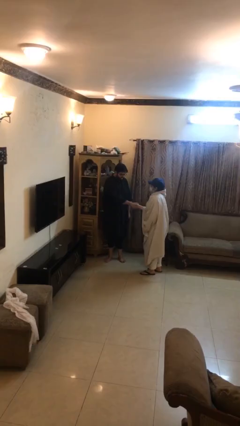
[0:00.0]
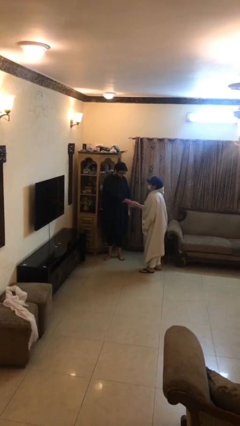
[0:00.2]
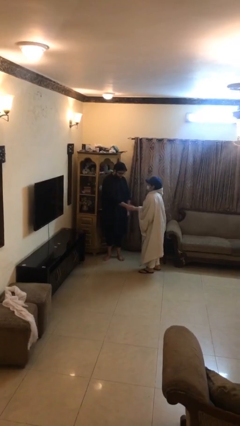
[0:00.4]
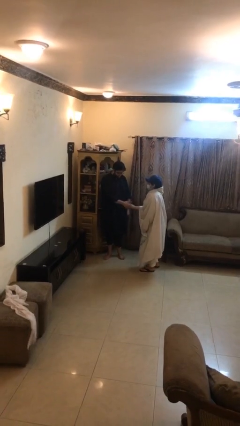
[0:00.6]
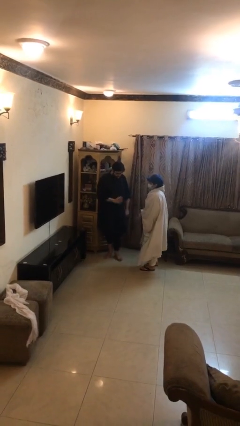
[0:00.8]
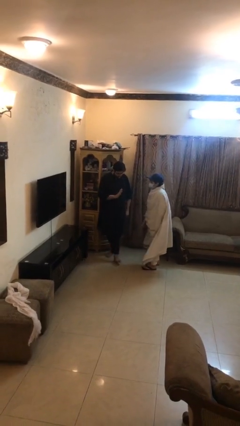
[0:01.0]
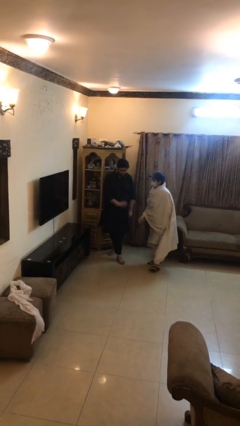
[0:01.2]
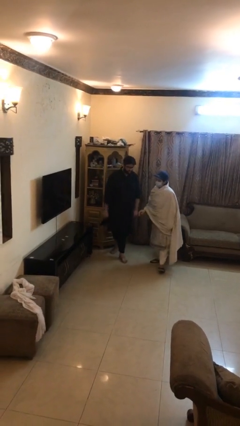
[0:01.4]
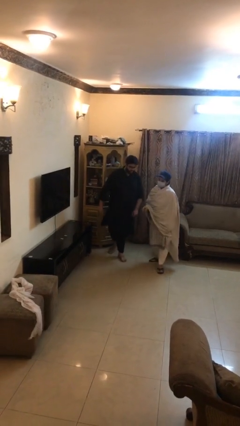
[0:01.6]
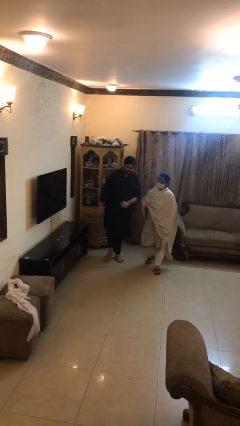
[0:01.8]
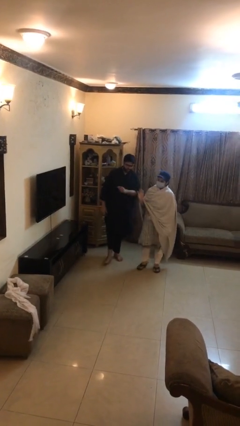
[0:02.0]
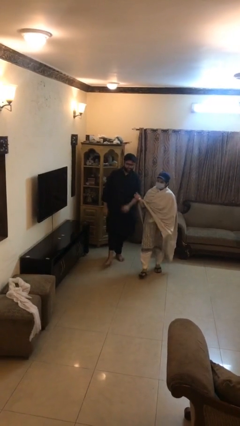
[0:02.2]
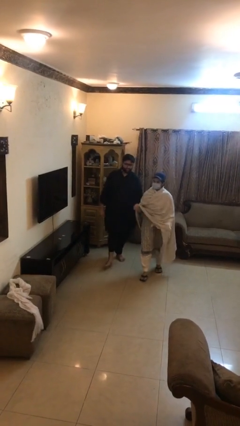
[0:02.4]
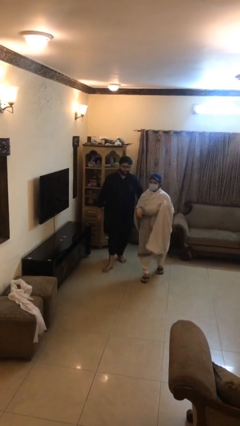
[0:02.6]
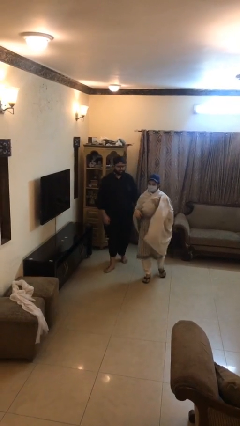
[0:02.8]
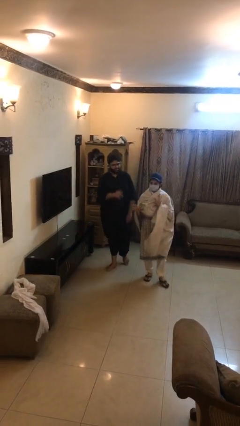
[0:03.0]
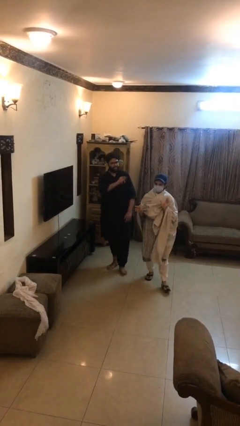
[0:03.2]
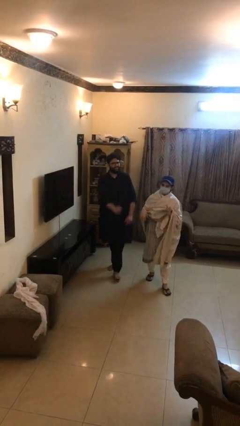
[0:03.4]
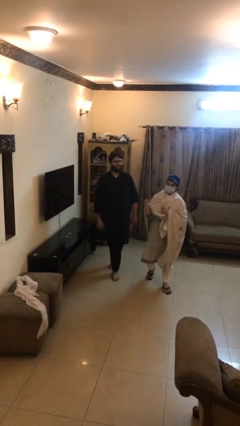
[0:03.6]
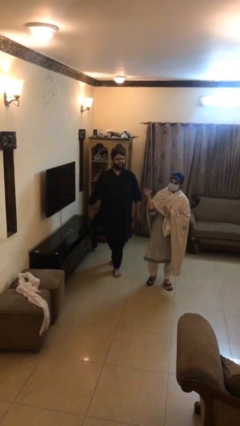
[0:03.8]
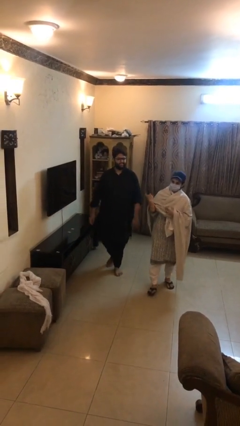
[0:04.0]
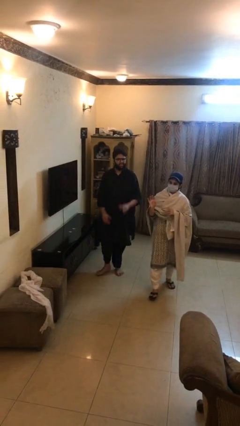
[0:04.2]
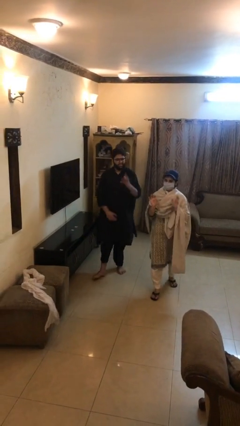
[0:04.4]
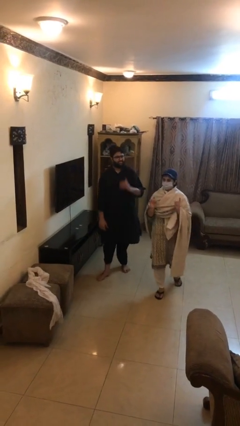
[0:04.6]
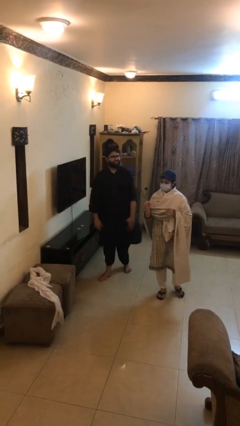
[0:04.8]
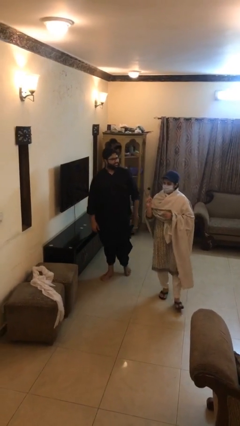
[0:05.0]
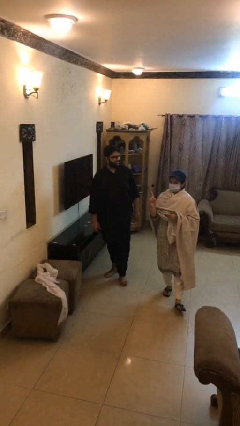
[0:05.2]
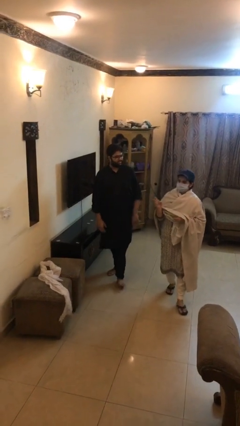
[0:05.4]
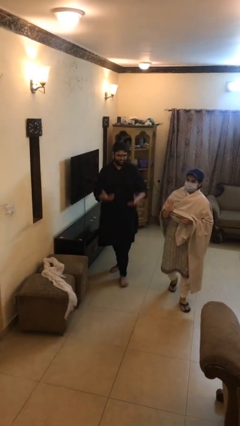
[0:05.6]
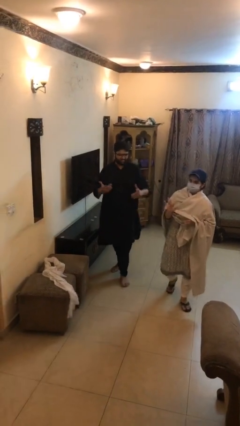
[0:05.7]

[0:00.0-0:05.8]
person talks to person

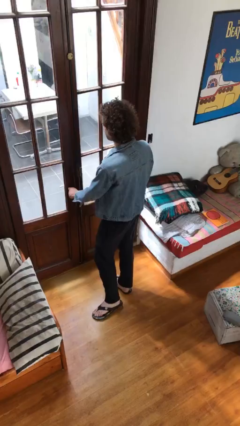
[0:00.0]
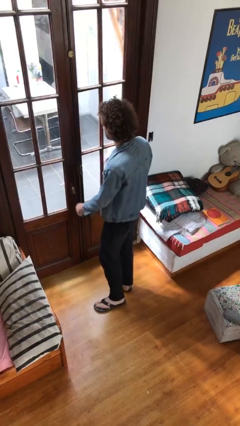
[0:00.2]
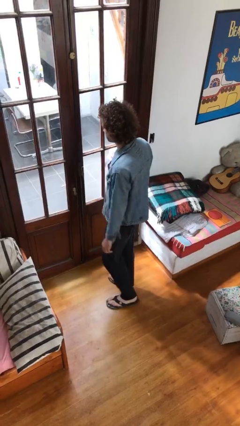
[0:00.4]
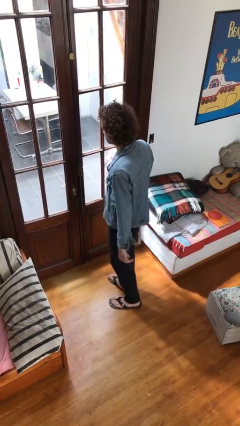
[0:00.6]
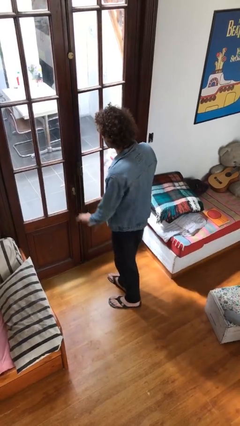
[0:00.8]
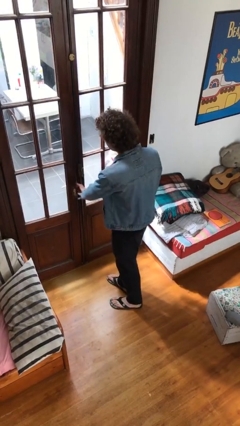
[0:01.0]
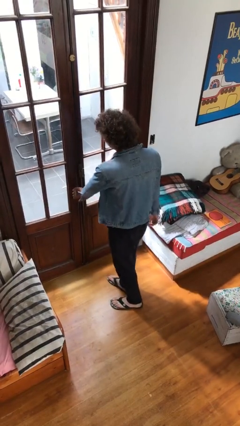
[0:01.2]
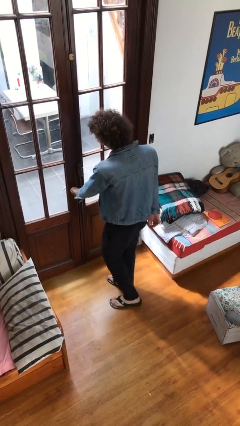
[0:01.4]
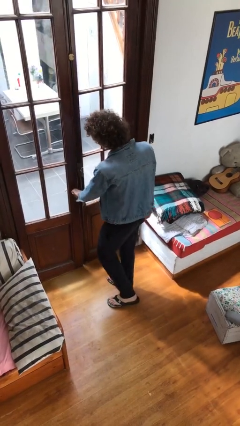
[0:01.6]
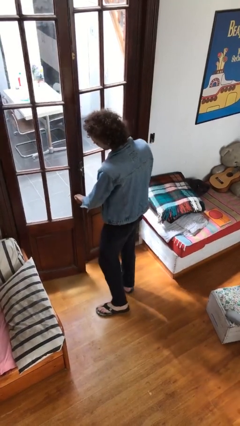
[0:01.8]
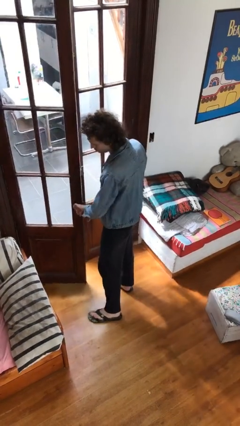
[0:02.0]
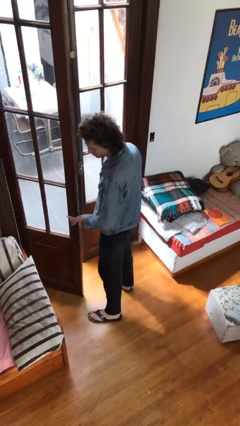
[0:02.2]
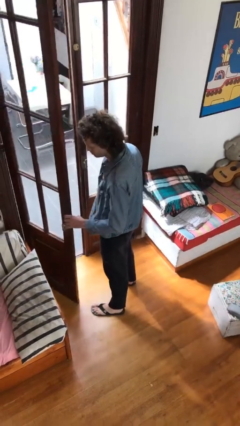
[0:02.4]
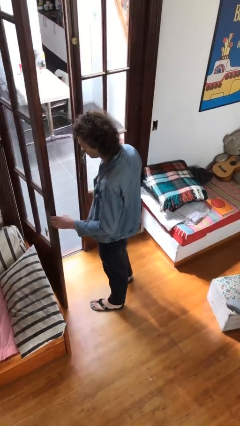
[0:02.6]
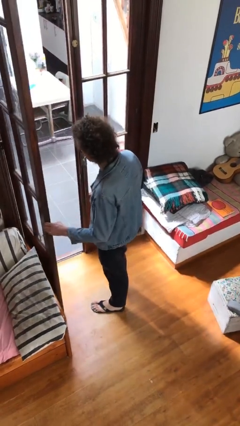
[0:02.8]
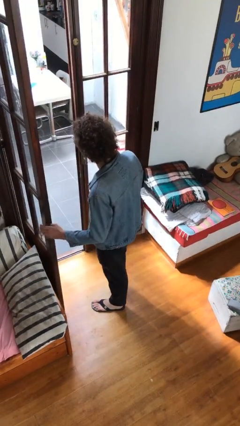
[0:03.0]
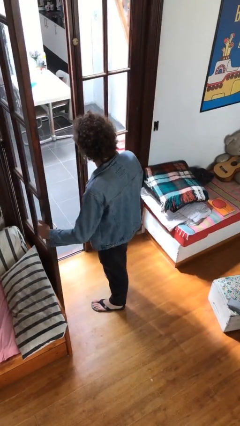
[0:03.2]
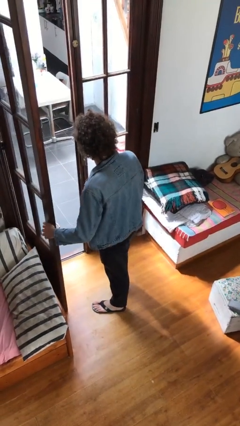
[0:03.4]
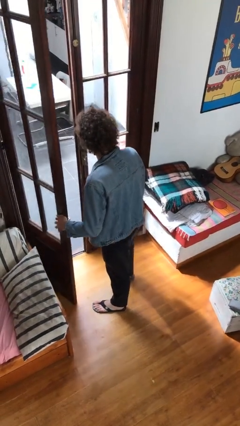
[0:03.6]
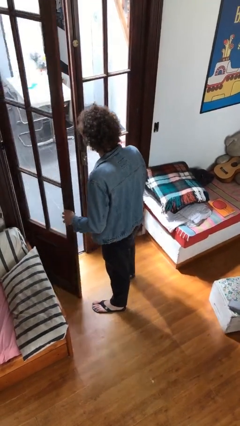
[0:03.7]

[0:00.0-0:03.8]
person opens facility door

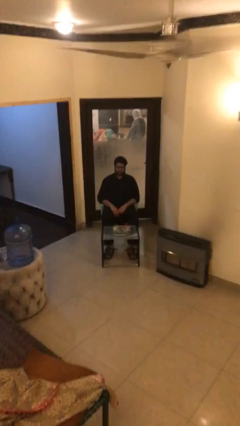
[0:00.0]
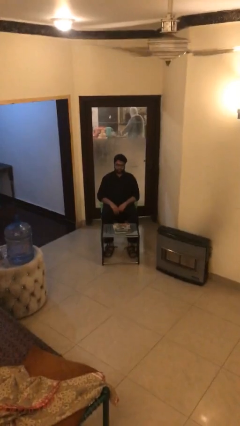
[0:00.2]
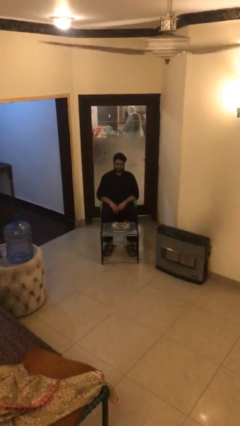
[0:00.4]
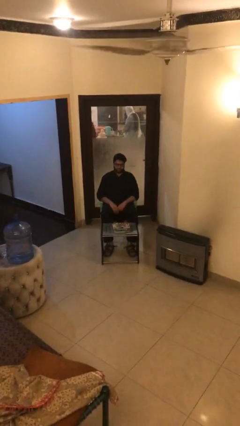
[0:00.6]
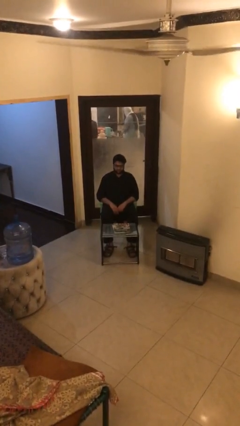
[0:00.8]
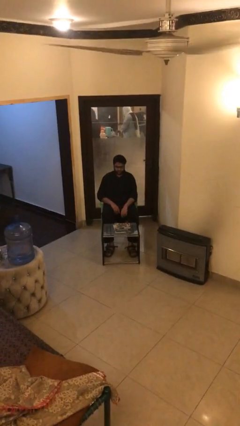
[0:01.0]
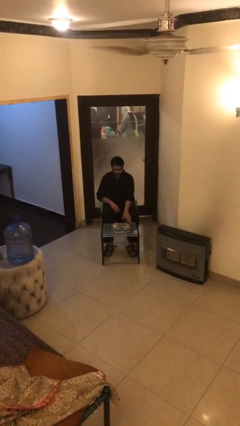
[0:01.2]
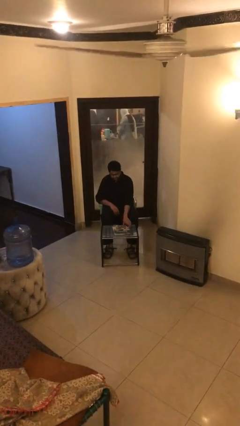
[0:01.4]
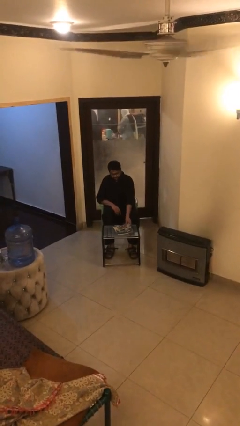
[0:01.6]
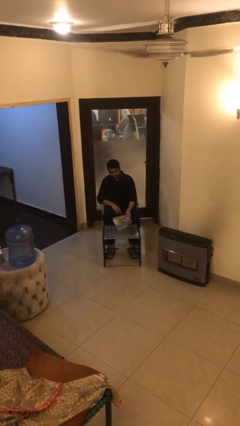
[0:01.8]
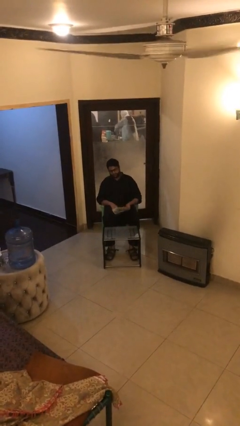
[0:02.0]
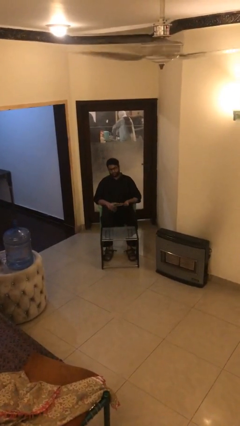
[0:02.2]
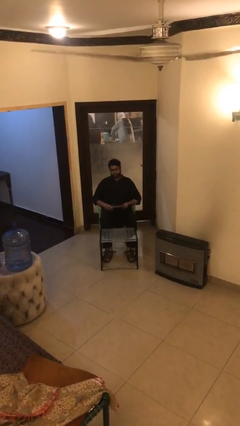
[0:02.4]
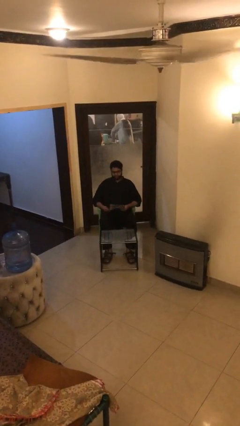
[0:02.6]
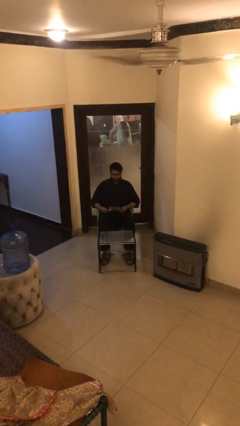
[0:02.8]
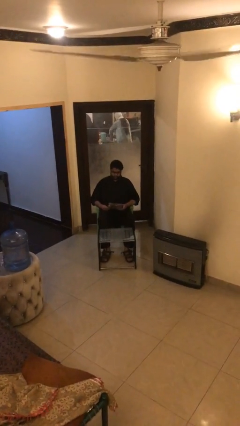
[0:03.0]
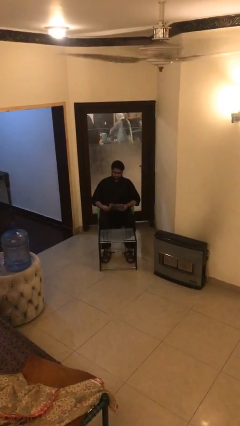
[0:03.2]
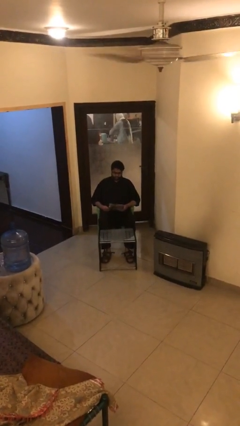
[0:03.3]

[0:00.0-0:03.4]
person picks up object from table

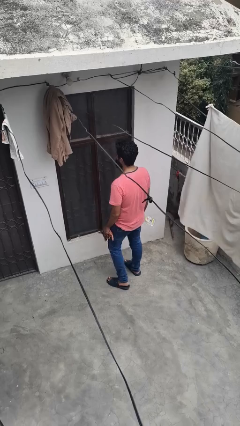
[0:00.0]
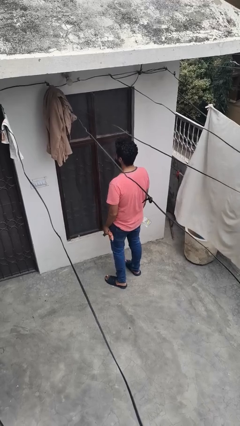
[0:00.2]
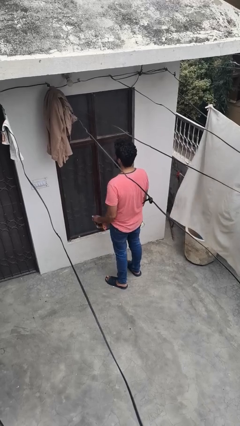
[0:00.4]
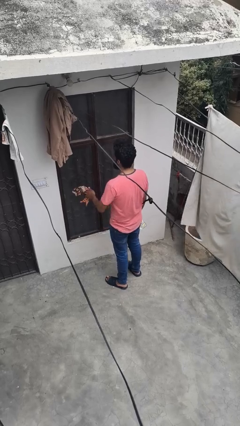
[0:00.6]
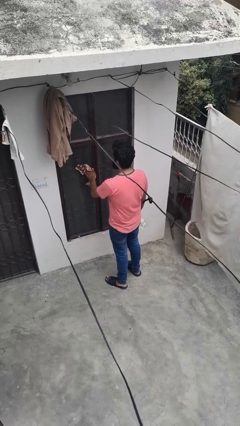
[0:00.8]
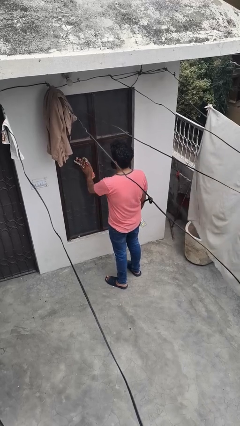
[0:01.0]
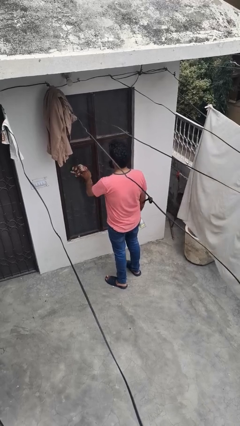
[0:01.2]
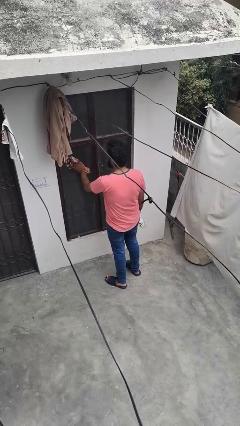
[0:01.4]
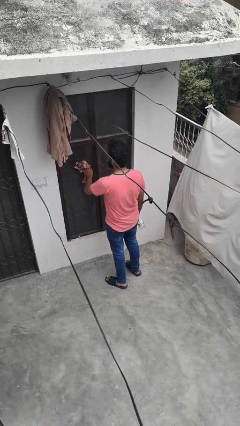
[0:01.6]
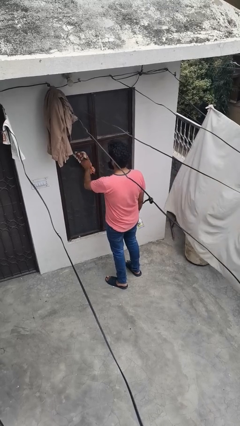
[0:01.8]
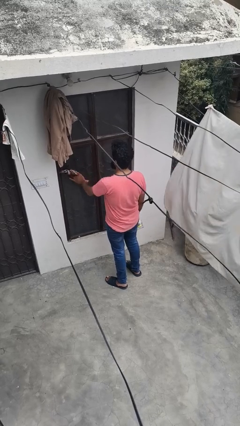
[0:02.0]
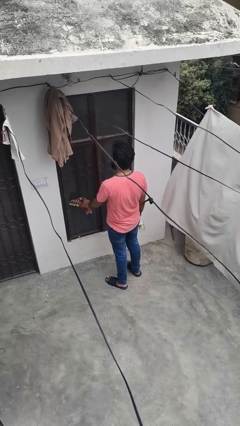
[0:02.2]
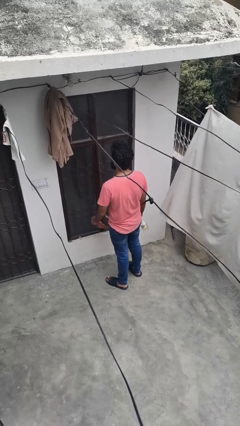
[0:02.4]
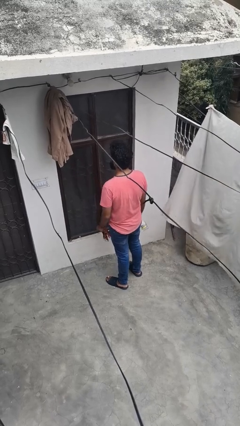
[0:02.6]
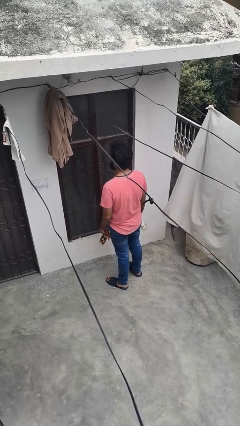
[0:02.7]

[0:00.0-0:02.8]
person washes window

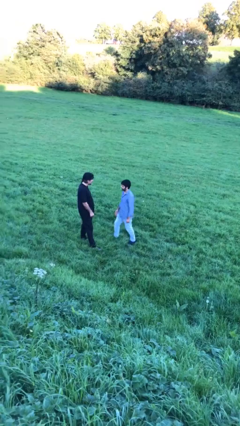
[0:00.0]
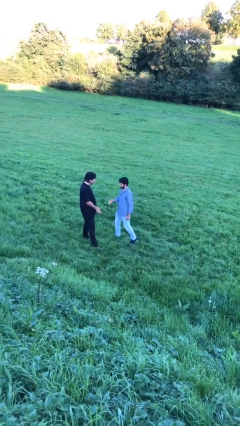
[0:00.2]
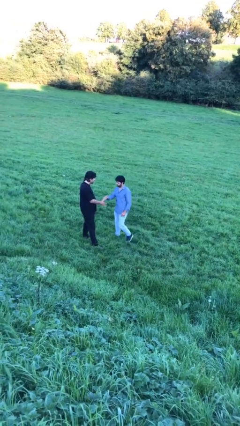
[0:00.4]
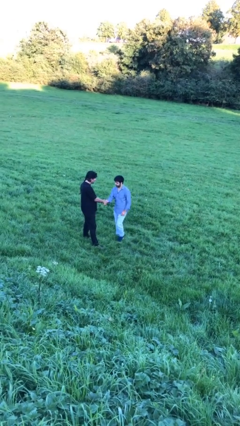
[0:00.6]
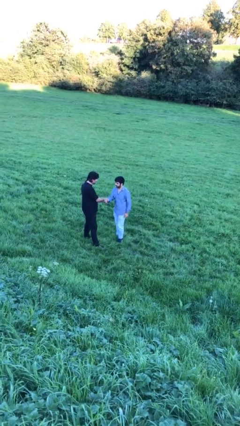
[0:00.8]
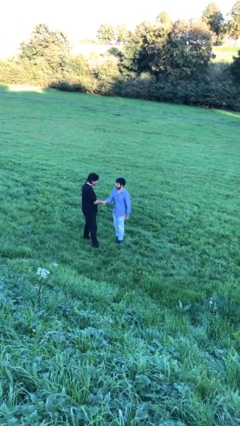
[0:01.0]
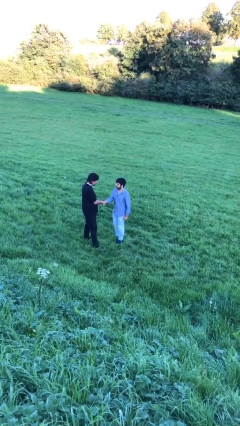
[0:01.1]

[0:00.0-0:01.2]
person shakes hand

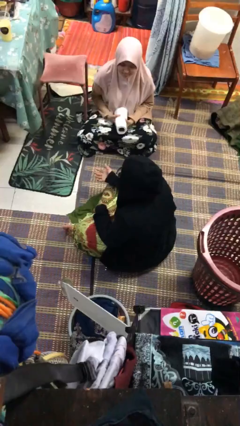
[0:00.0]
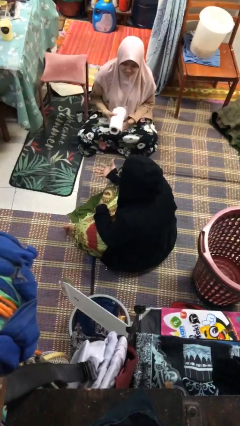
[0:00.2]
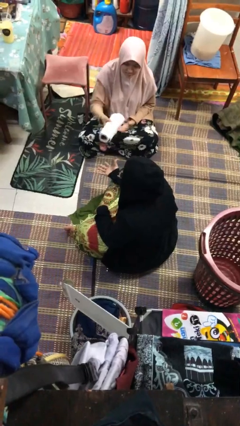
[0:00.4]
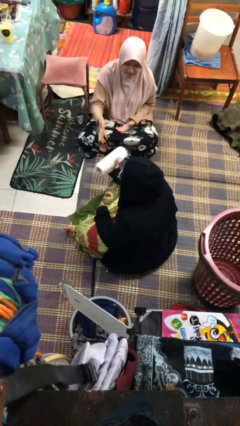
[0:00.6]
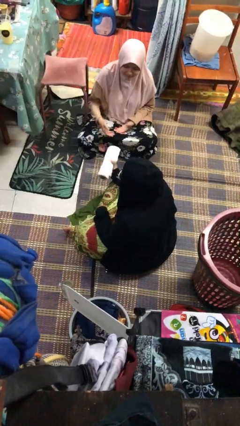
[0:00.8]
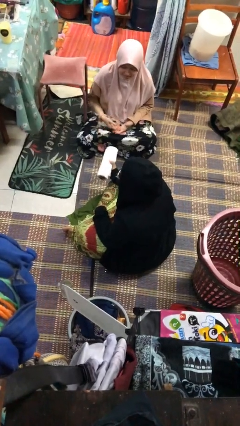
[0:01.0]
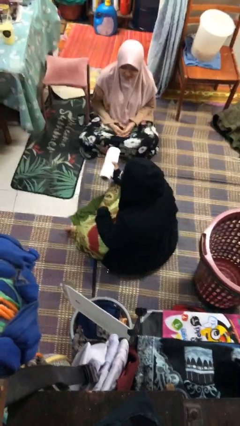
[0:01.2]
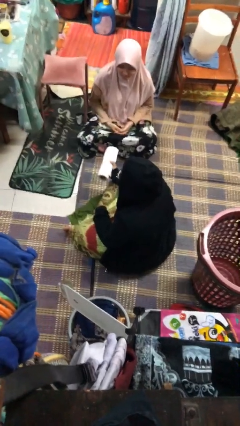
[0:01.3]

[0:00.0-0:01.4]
person catches object from person
